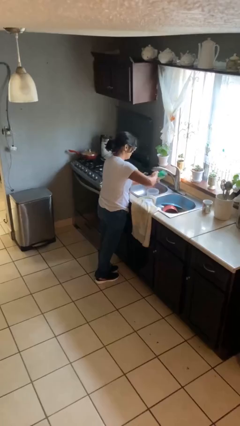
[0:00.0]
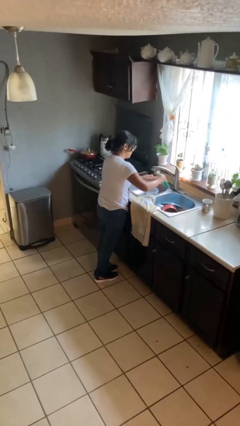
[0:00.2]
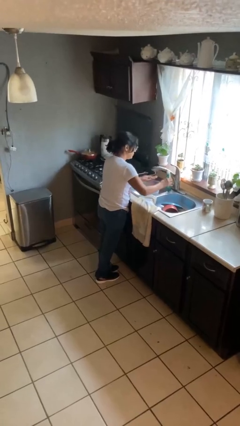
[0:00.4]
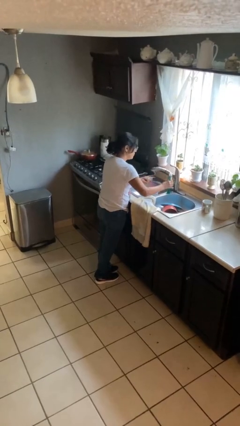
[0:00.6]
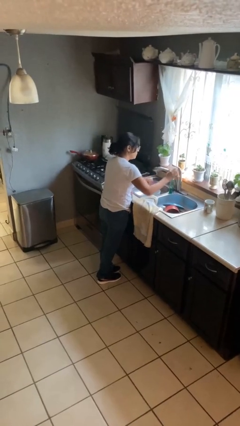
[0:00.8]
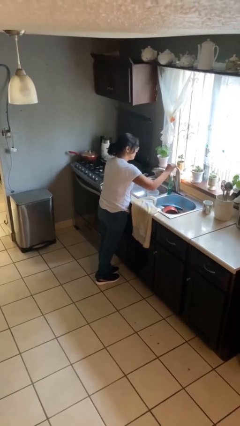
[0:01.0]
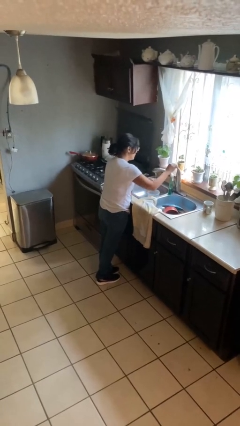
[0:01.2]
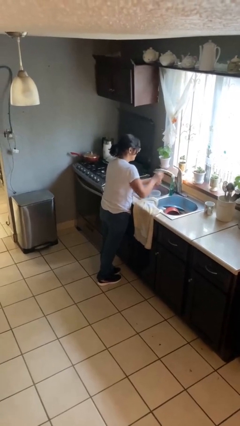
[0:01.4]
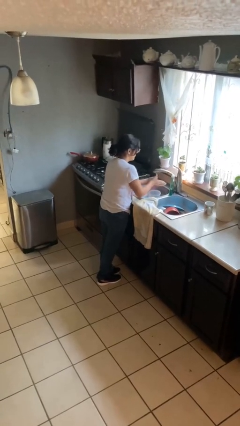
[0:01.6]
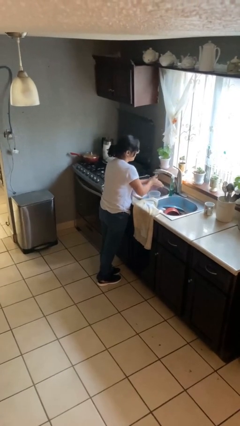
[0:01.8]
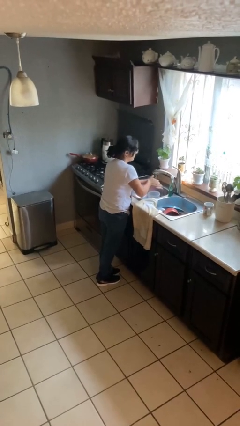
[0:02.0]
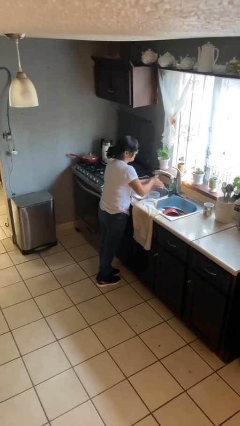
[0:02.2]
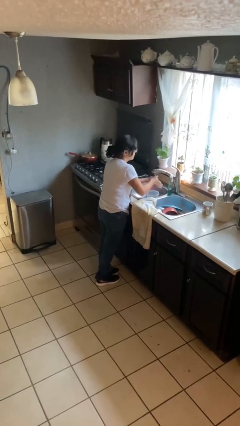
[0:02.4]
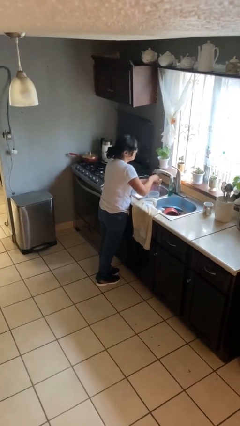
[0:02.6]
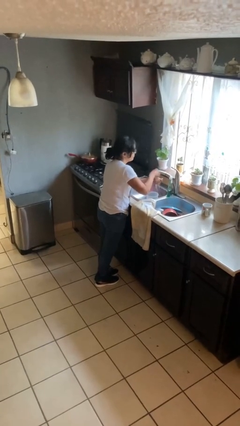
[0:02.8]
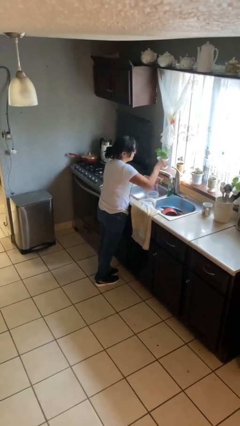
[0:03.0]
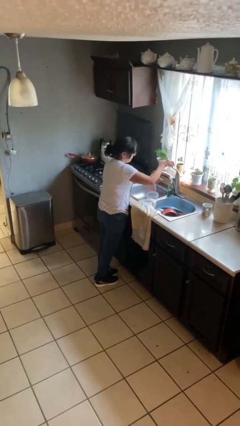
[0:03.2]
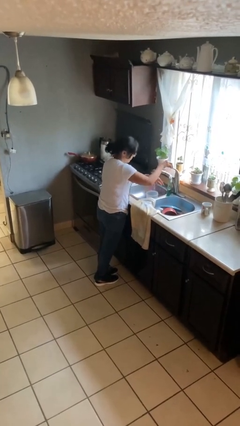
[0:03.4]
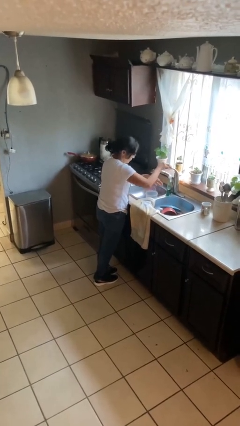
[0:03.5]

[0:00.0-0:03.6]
person washes hands

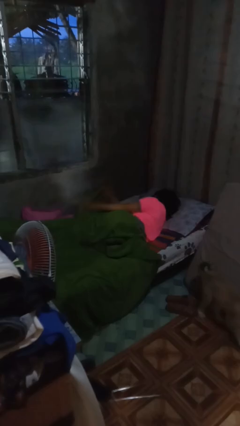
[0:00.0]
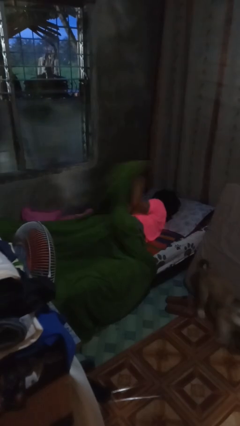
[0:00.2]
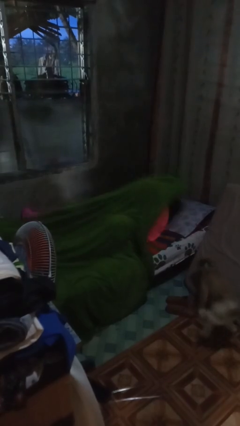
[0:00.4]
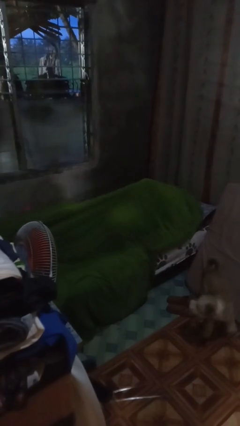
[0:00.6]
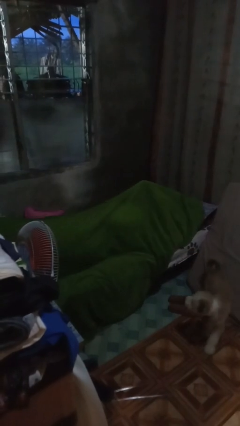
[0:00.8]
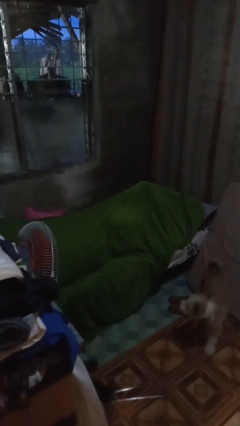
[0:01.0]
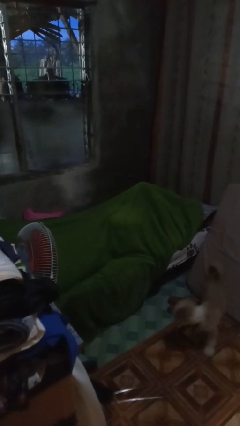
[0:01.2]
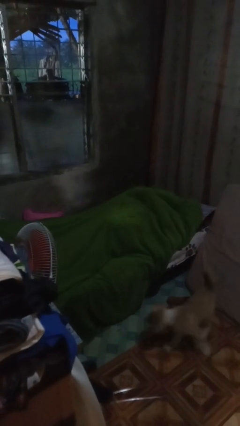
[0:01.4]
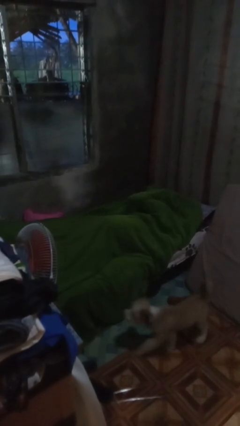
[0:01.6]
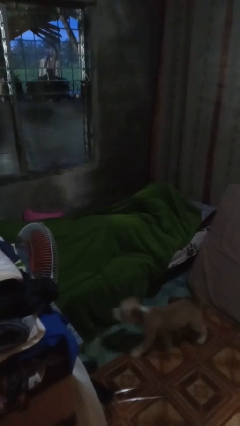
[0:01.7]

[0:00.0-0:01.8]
person covers with bedsheets

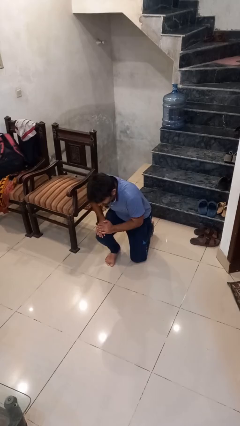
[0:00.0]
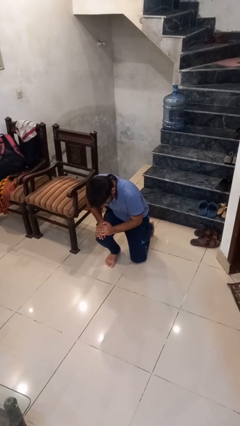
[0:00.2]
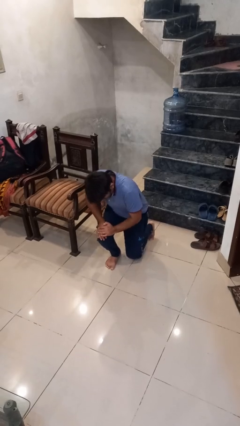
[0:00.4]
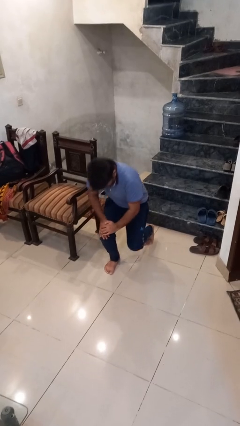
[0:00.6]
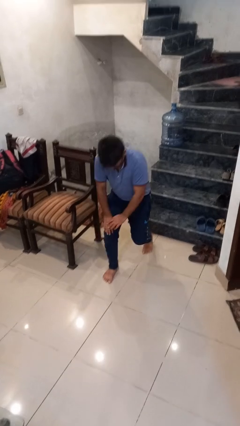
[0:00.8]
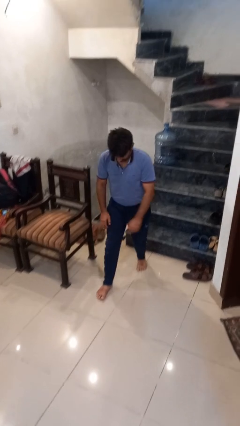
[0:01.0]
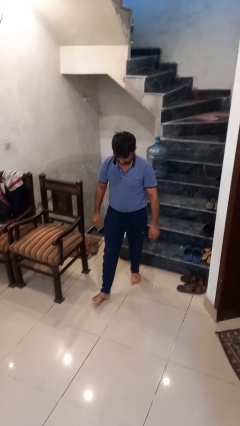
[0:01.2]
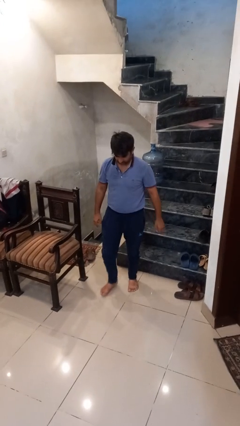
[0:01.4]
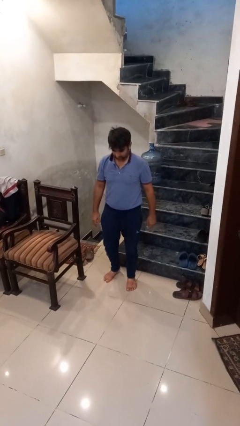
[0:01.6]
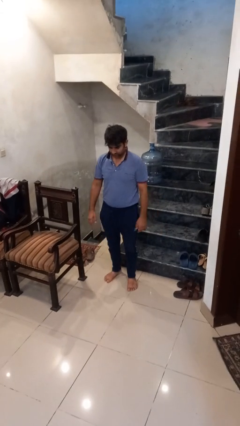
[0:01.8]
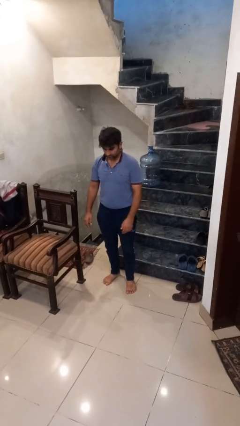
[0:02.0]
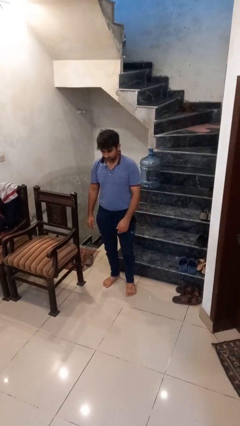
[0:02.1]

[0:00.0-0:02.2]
person stands up from floor

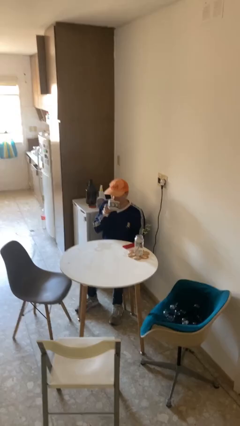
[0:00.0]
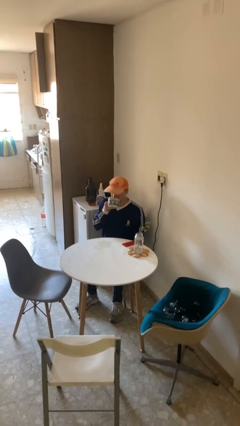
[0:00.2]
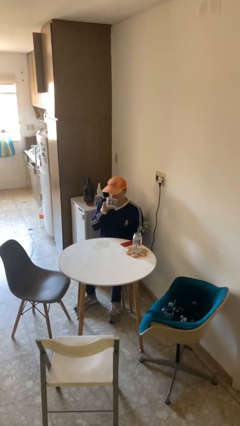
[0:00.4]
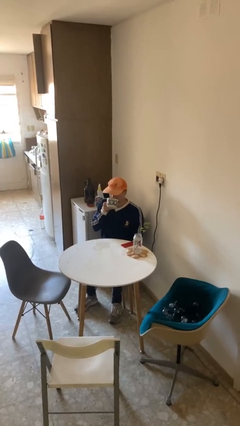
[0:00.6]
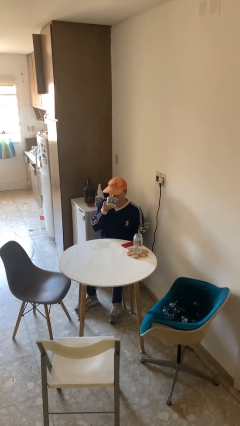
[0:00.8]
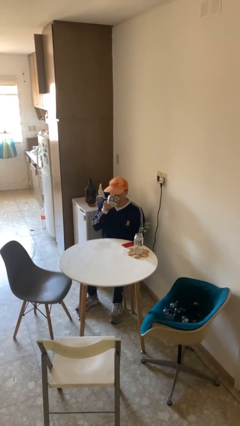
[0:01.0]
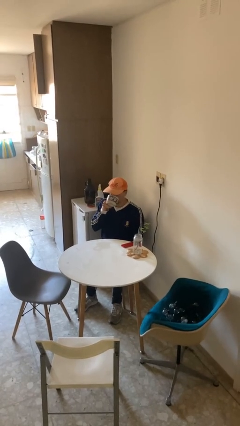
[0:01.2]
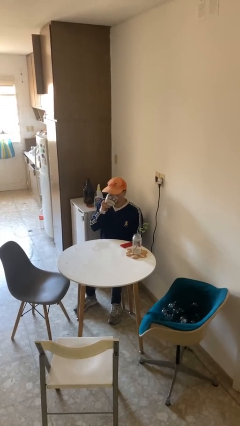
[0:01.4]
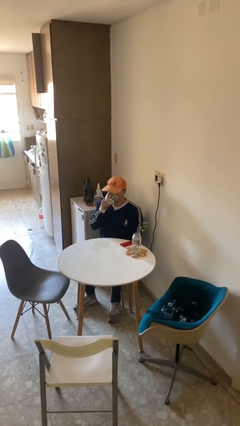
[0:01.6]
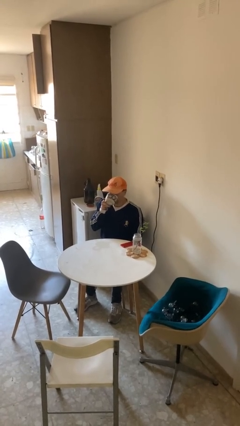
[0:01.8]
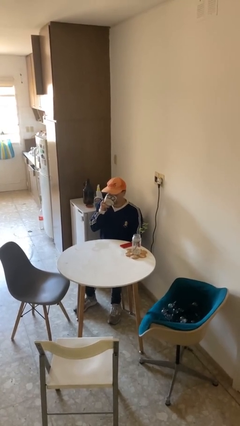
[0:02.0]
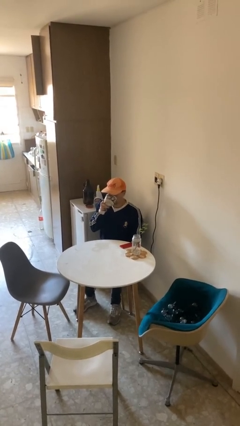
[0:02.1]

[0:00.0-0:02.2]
person drinks from mug

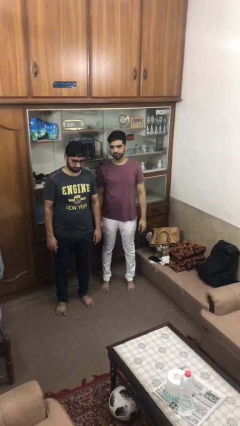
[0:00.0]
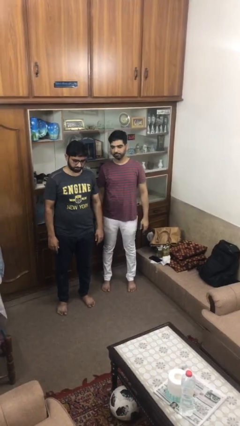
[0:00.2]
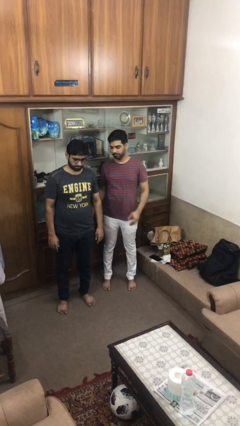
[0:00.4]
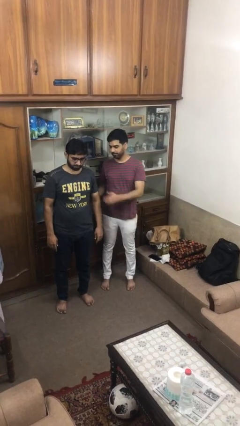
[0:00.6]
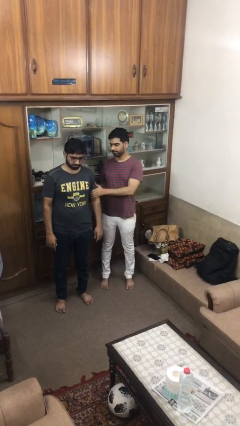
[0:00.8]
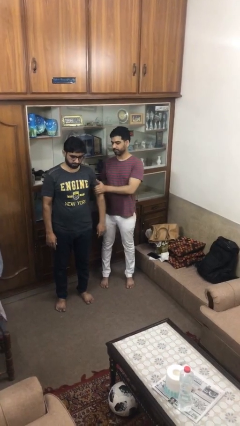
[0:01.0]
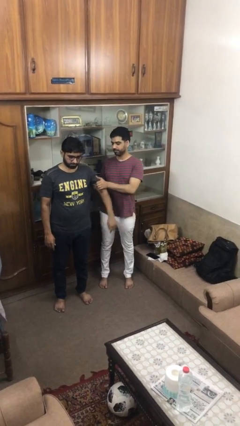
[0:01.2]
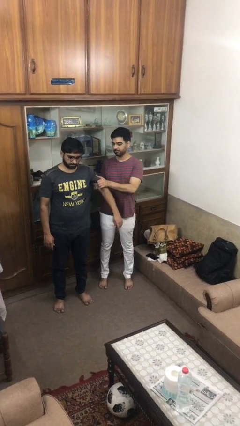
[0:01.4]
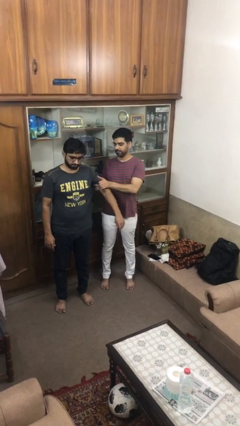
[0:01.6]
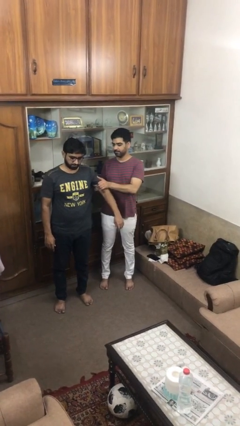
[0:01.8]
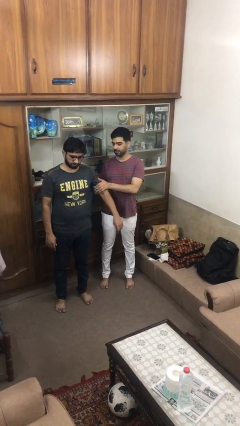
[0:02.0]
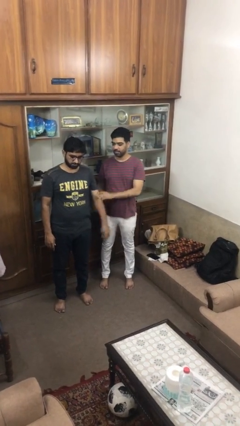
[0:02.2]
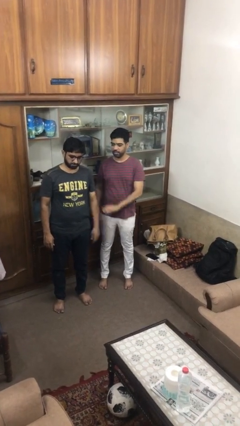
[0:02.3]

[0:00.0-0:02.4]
person grabs person by bicep

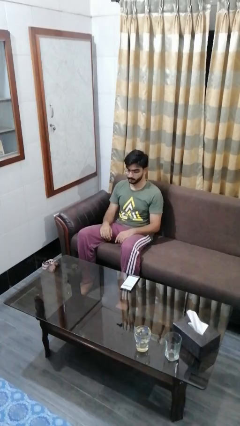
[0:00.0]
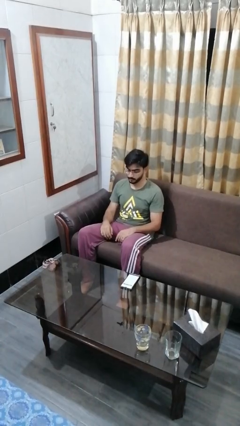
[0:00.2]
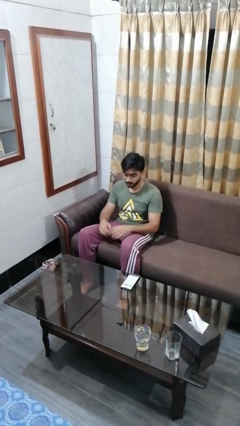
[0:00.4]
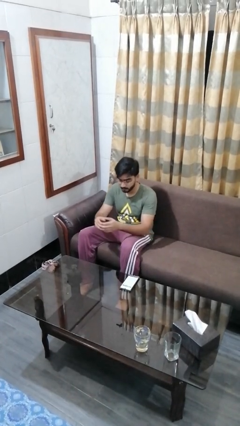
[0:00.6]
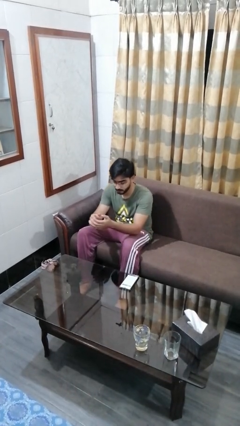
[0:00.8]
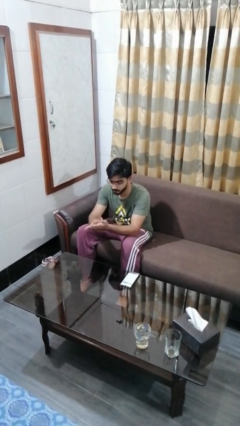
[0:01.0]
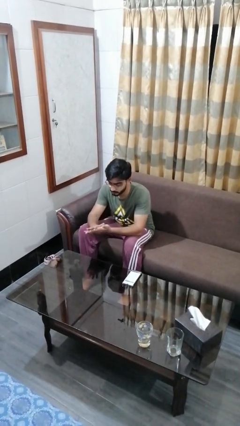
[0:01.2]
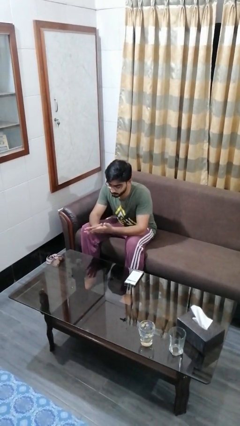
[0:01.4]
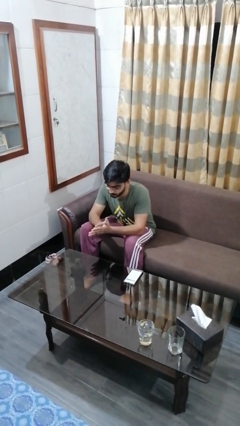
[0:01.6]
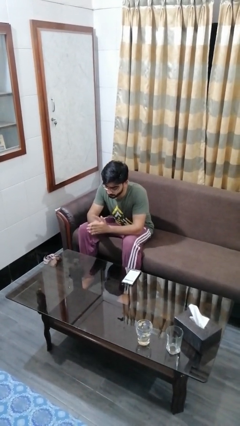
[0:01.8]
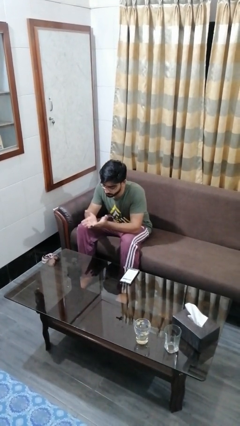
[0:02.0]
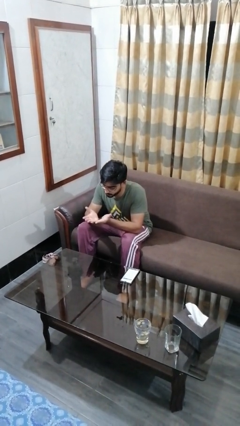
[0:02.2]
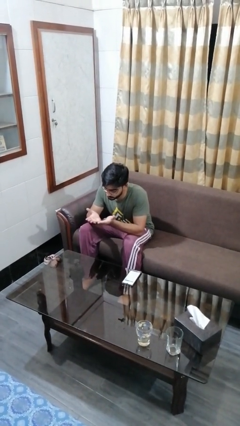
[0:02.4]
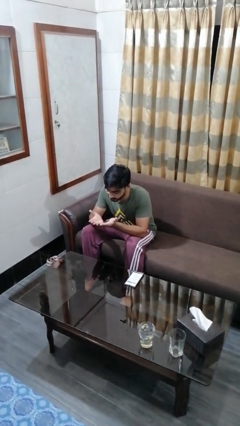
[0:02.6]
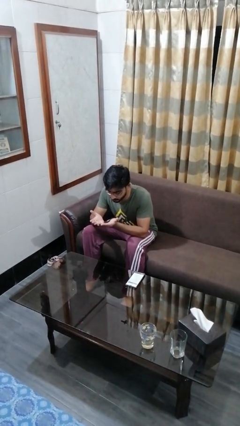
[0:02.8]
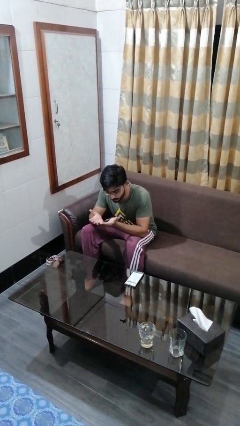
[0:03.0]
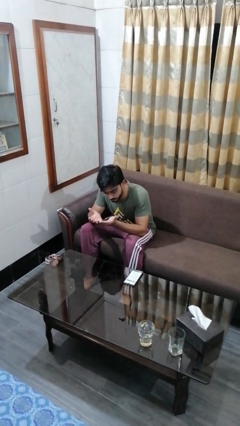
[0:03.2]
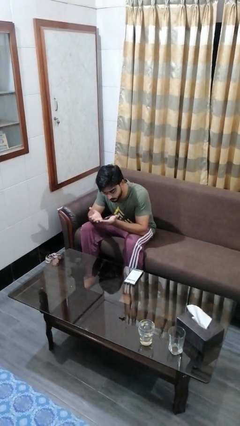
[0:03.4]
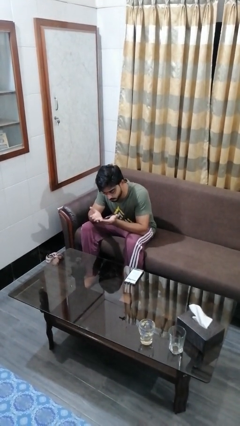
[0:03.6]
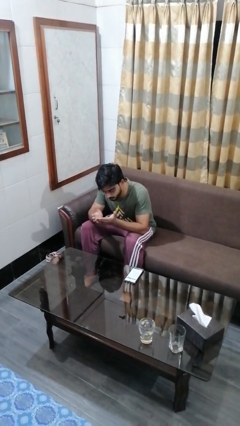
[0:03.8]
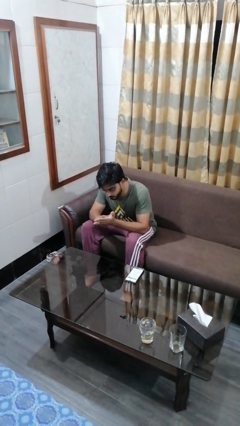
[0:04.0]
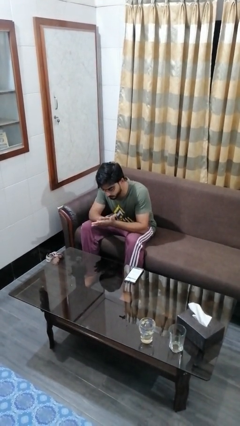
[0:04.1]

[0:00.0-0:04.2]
person looks at hands in lap

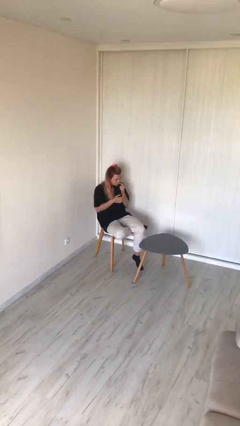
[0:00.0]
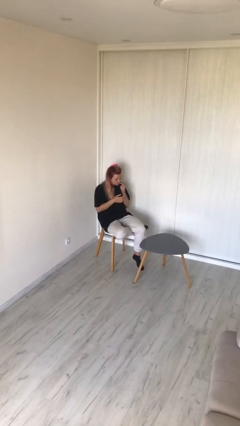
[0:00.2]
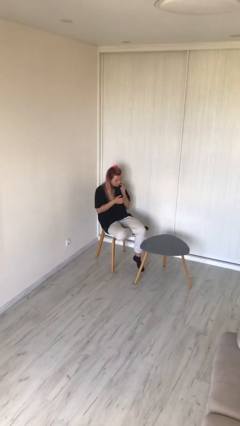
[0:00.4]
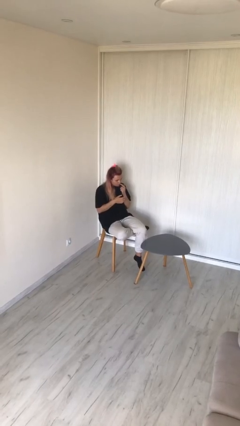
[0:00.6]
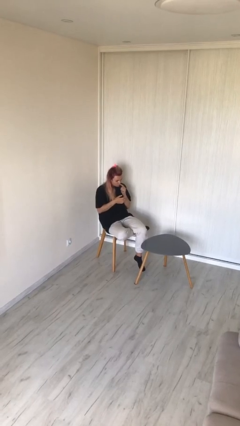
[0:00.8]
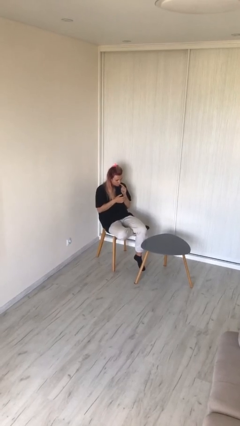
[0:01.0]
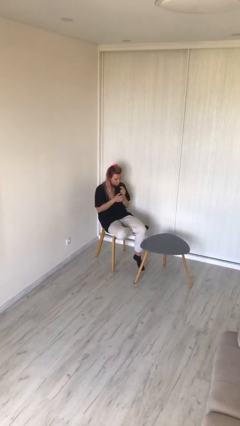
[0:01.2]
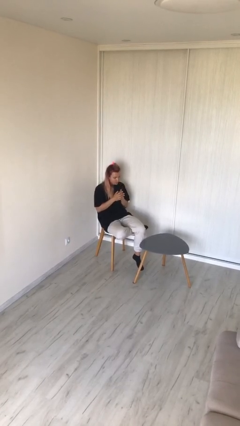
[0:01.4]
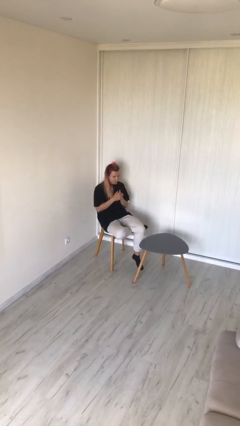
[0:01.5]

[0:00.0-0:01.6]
person licks fingers
